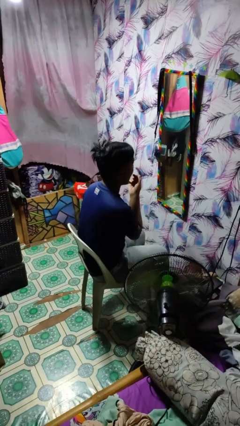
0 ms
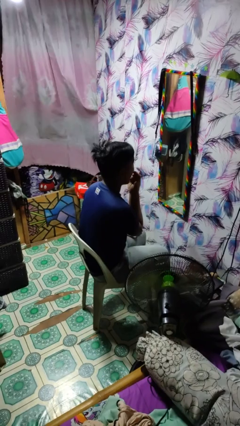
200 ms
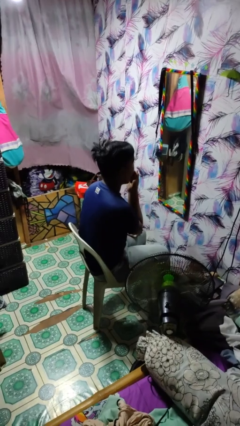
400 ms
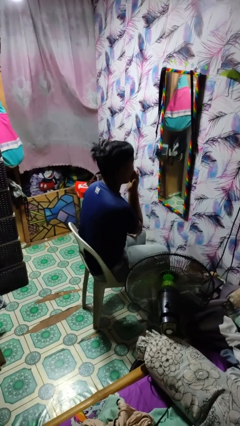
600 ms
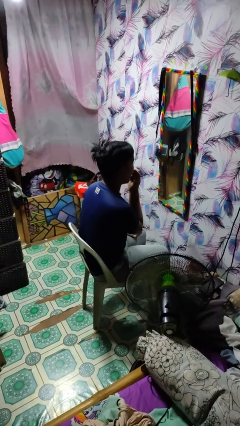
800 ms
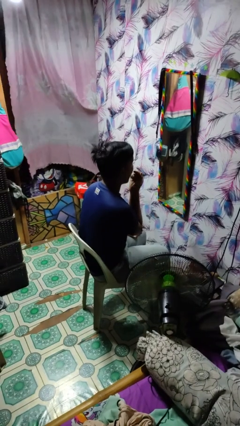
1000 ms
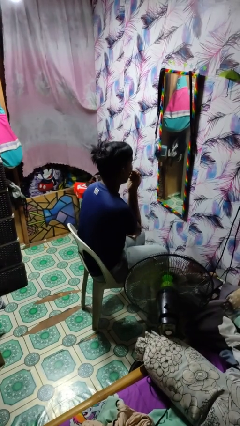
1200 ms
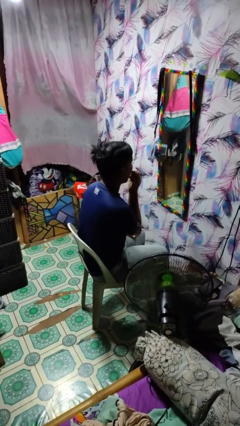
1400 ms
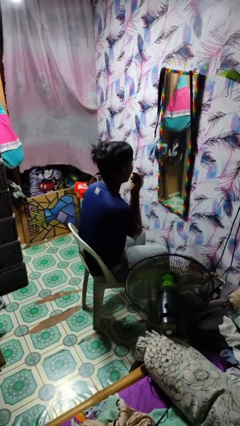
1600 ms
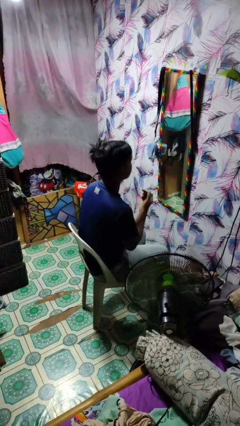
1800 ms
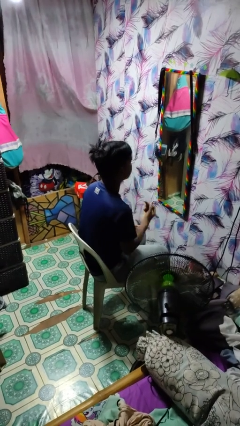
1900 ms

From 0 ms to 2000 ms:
person applies lip makeup

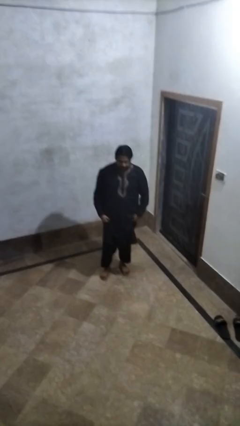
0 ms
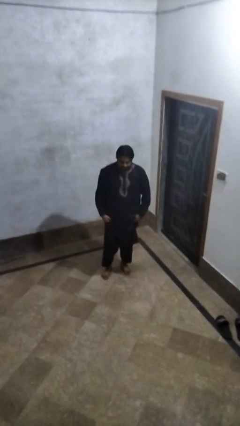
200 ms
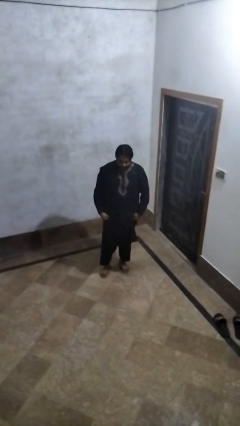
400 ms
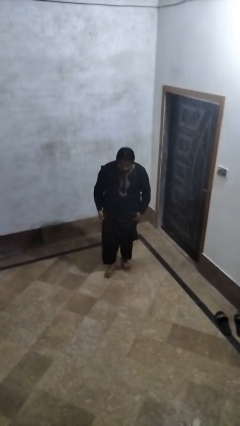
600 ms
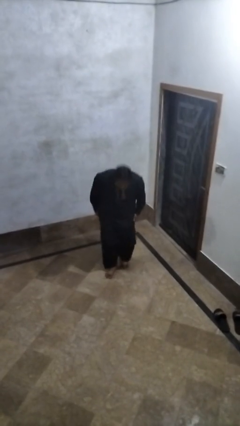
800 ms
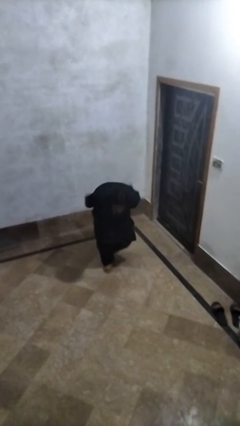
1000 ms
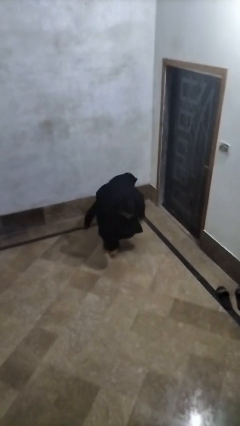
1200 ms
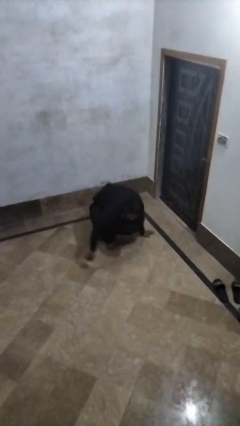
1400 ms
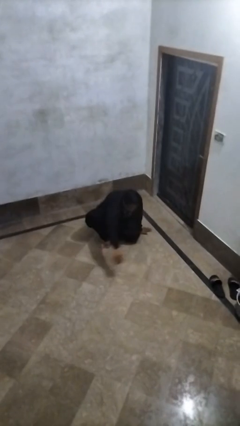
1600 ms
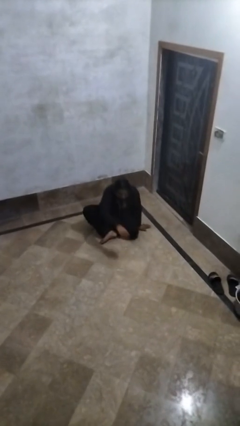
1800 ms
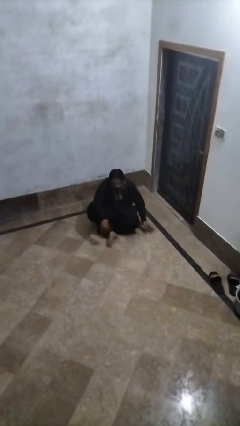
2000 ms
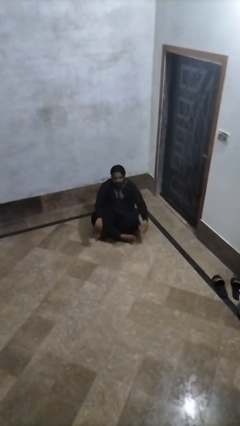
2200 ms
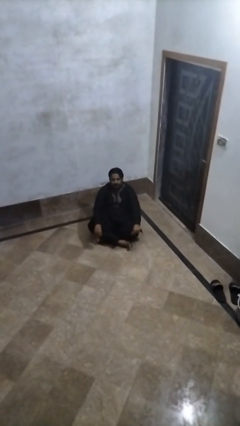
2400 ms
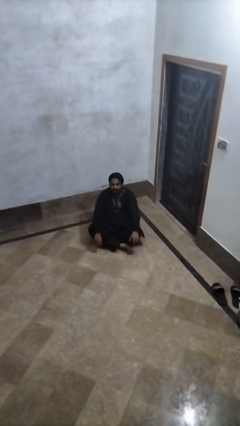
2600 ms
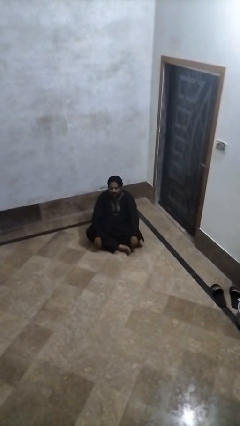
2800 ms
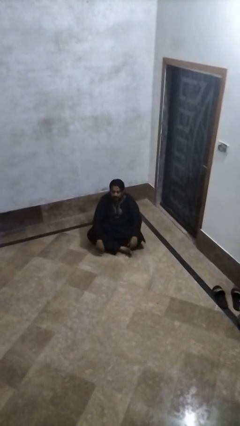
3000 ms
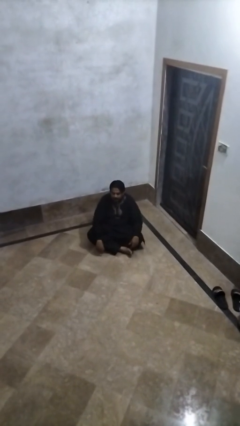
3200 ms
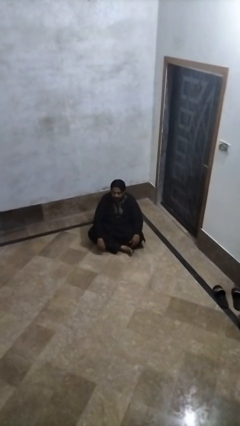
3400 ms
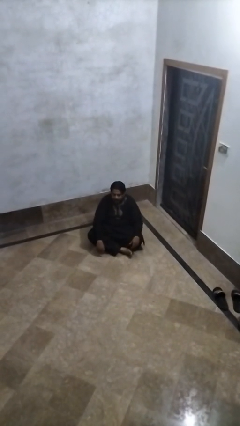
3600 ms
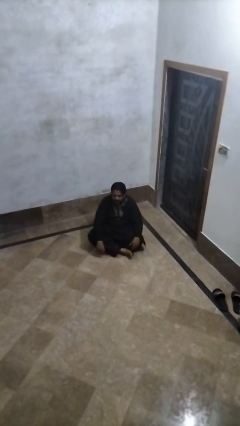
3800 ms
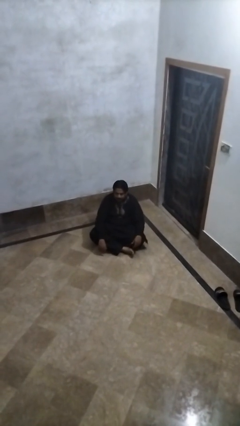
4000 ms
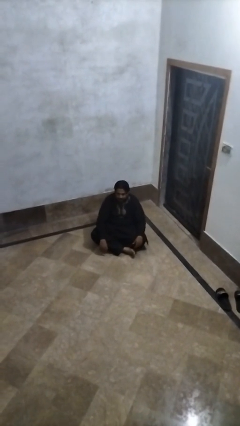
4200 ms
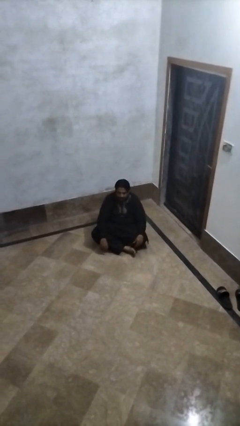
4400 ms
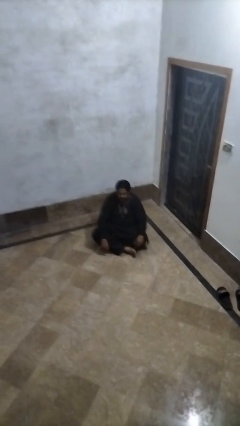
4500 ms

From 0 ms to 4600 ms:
person sits crisscross

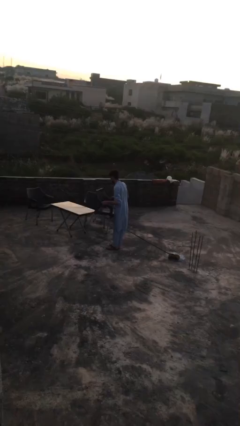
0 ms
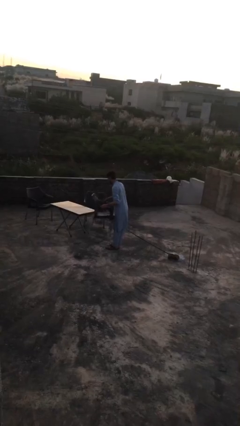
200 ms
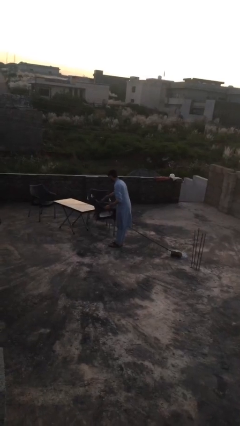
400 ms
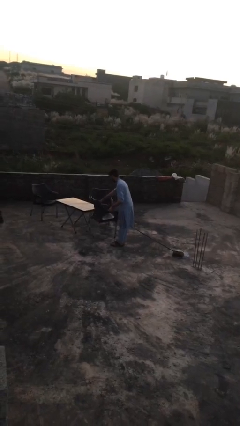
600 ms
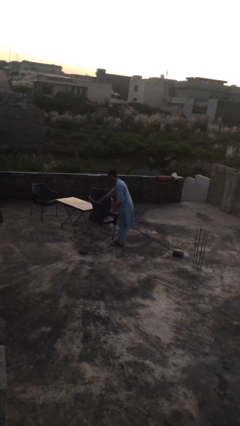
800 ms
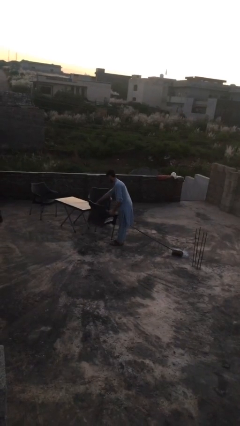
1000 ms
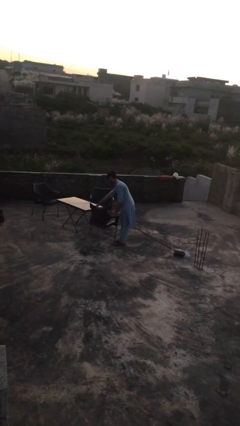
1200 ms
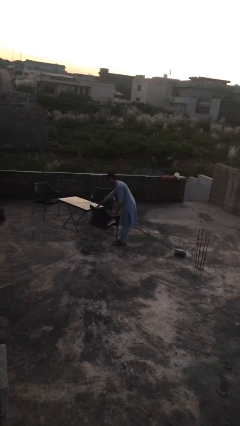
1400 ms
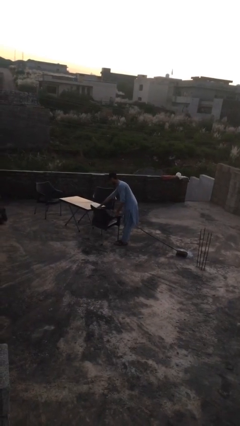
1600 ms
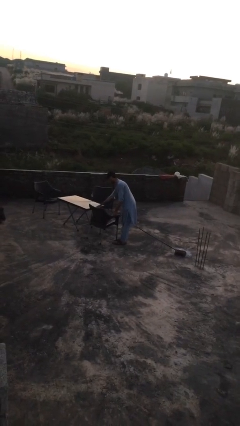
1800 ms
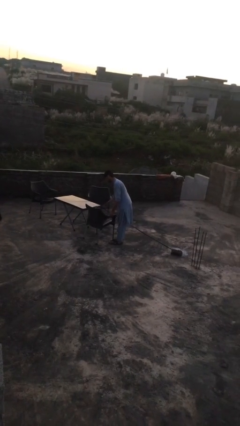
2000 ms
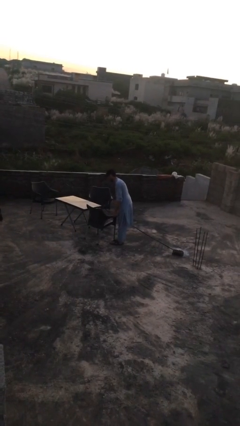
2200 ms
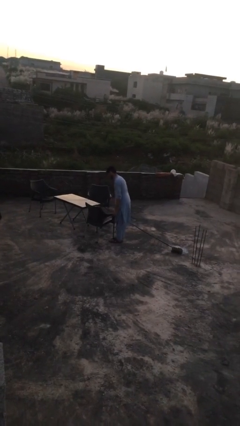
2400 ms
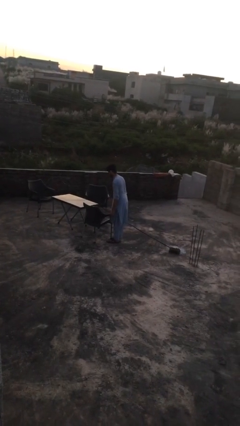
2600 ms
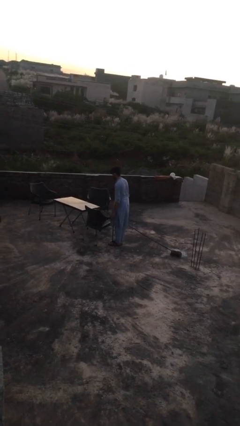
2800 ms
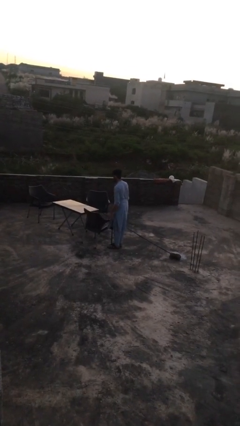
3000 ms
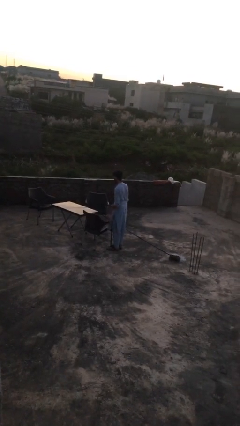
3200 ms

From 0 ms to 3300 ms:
person puts down object on floor

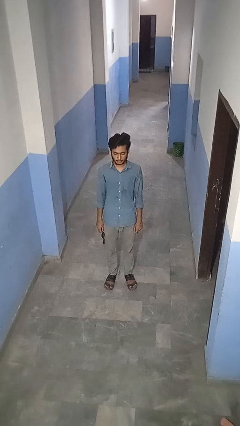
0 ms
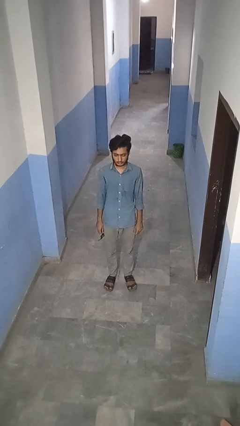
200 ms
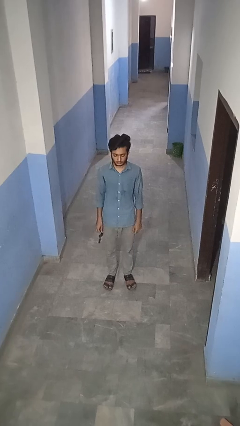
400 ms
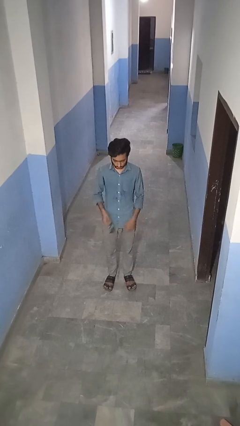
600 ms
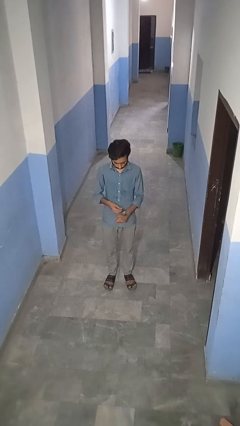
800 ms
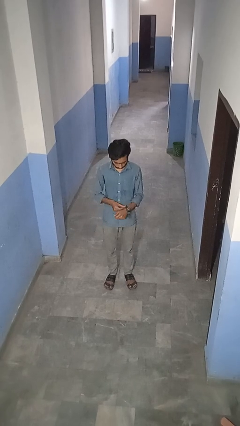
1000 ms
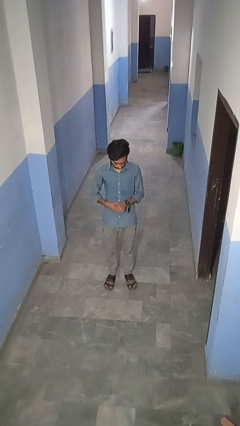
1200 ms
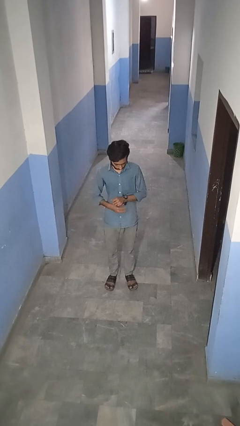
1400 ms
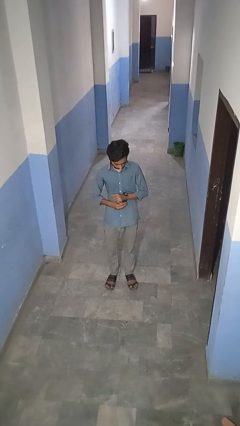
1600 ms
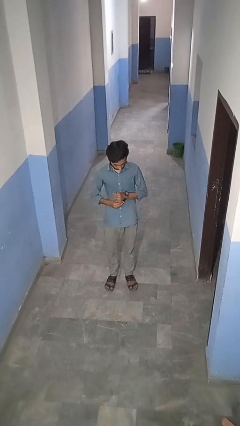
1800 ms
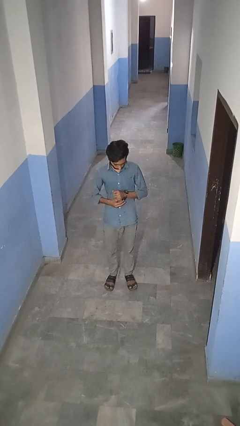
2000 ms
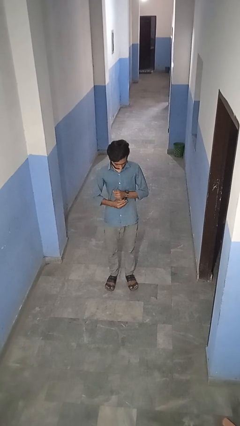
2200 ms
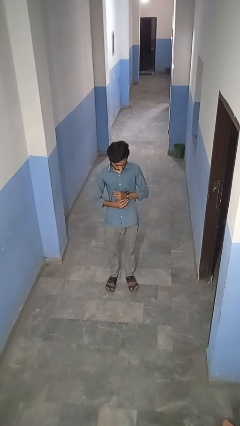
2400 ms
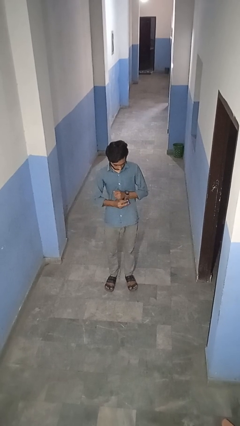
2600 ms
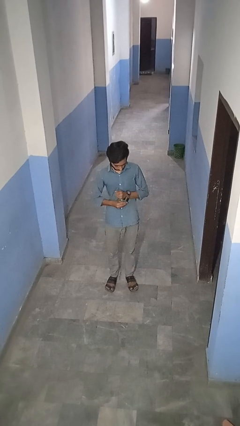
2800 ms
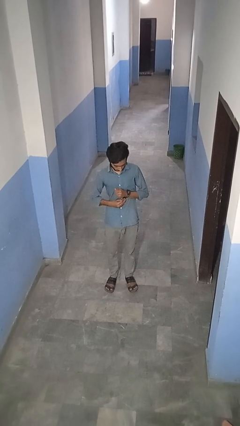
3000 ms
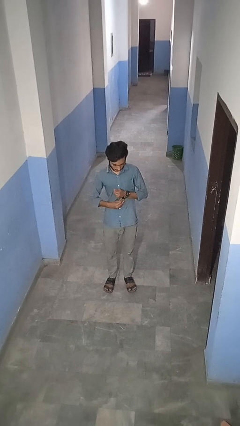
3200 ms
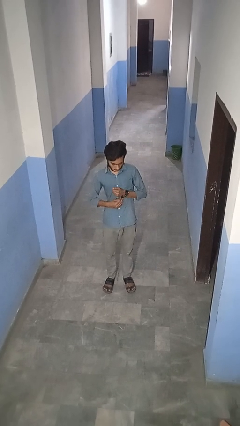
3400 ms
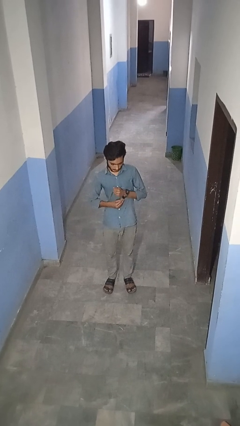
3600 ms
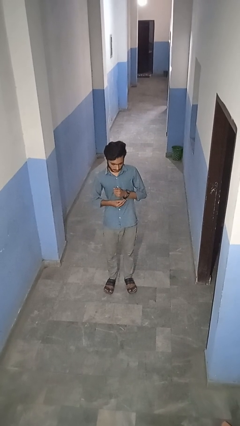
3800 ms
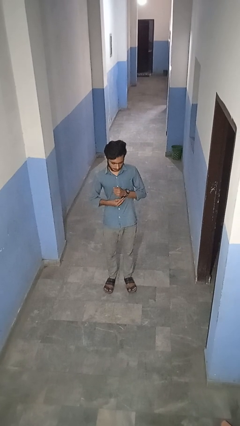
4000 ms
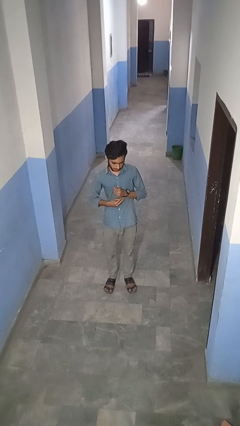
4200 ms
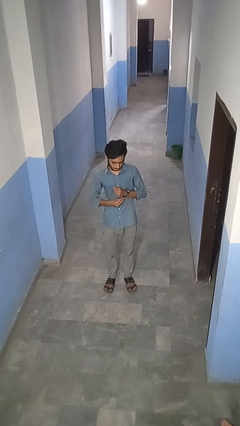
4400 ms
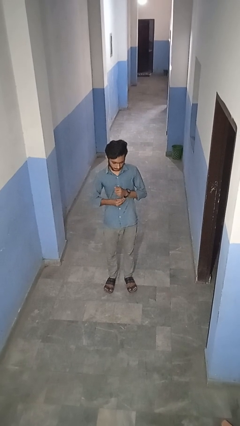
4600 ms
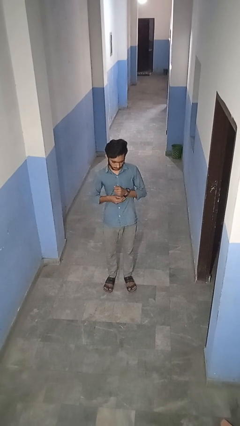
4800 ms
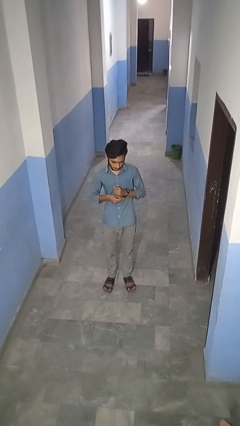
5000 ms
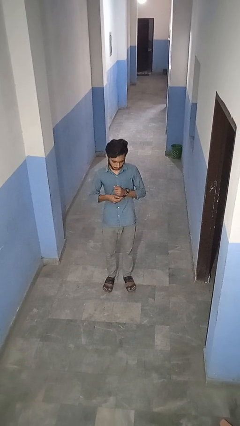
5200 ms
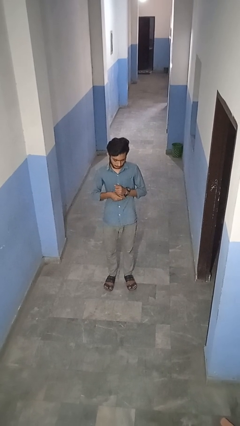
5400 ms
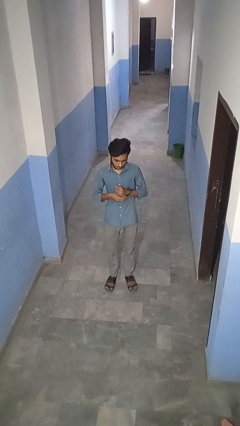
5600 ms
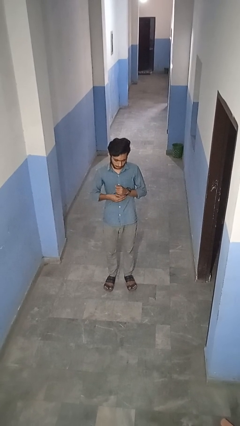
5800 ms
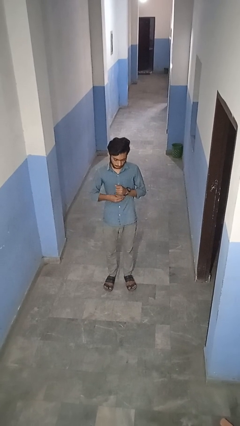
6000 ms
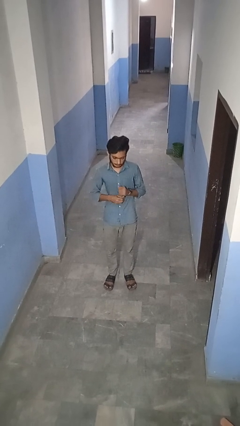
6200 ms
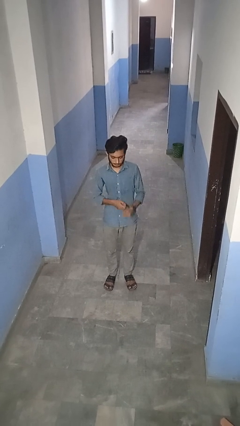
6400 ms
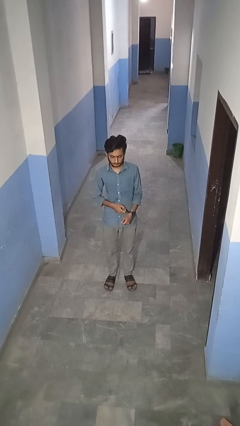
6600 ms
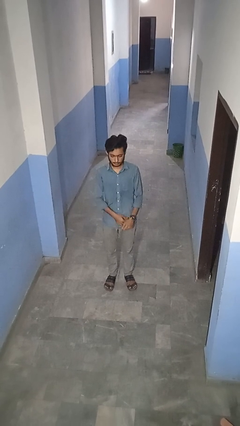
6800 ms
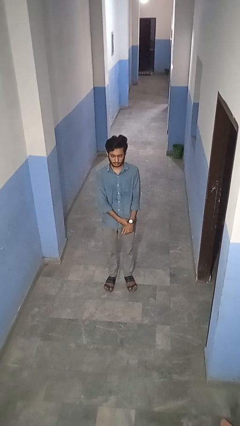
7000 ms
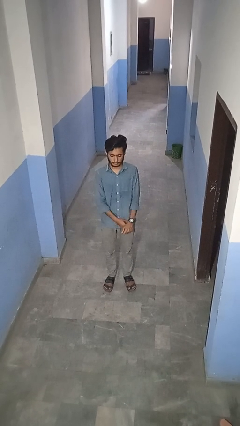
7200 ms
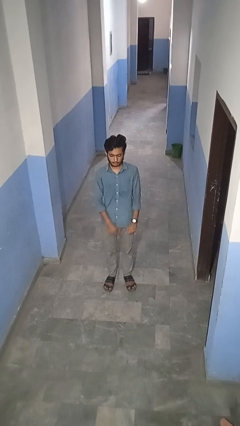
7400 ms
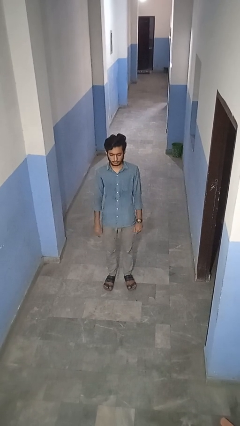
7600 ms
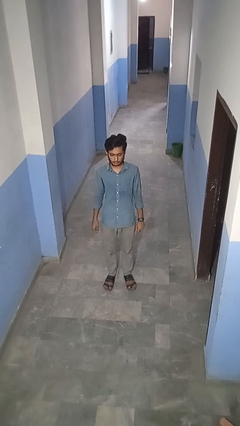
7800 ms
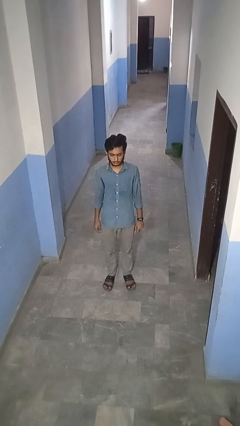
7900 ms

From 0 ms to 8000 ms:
person puts on wristwatch
